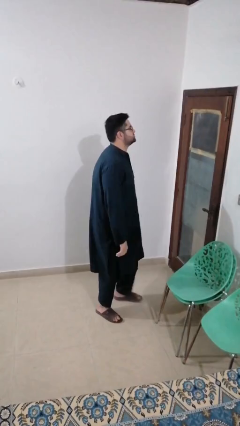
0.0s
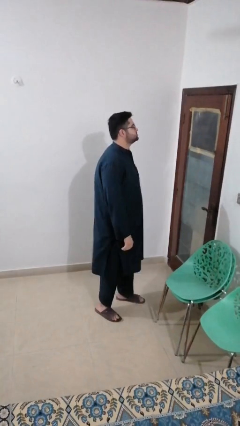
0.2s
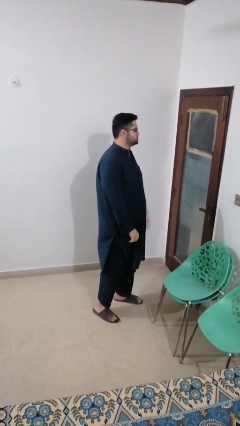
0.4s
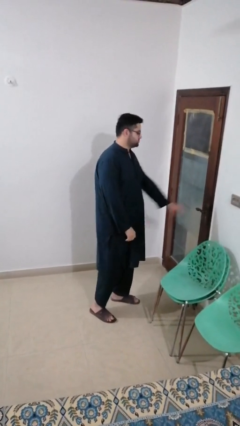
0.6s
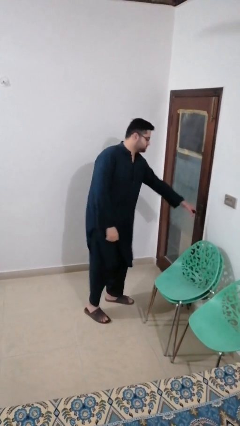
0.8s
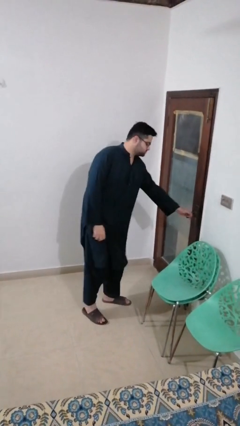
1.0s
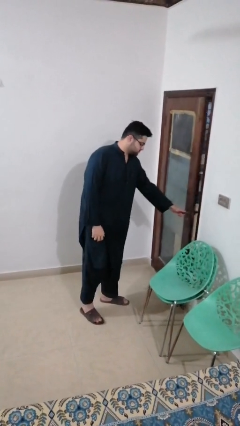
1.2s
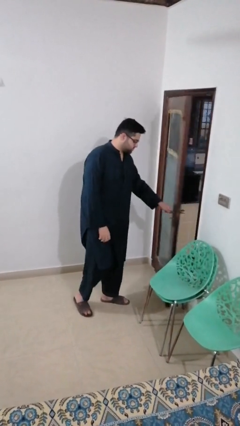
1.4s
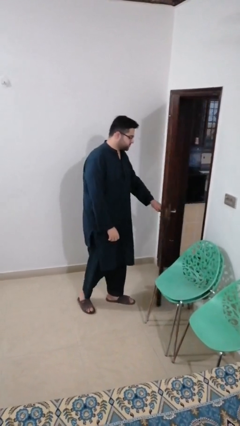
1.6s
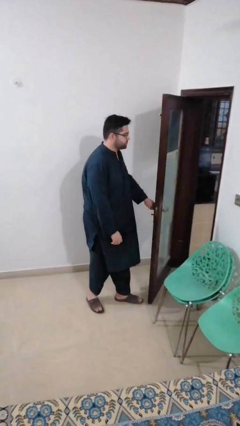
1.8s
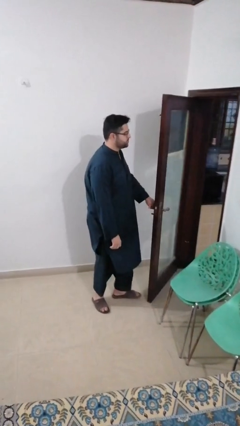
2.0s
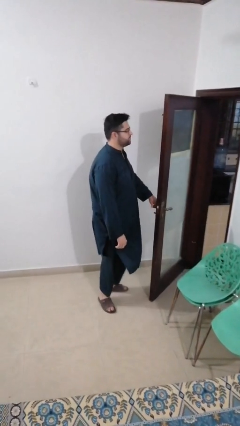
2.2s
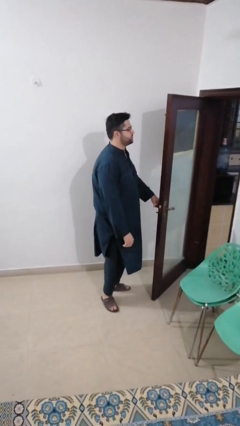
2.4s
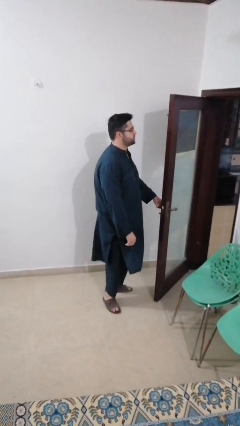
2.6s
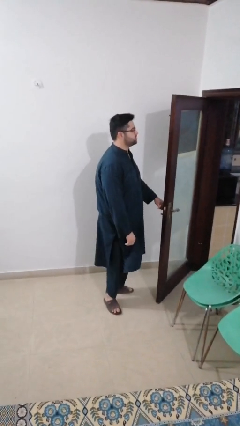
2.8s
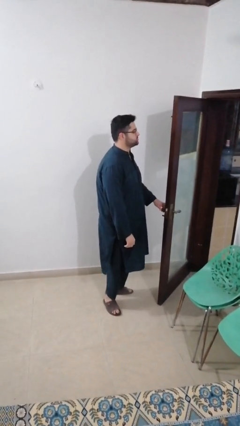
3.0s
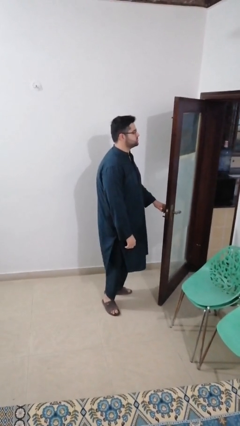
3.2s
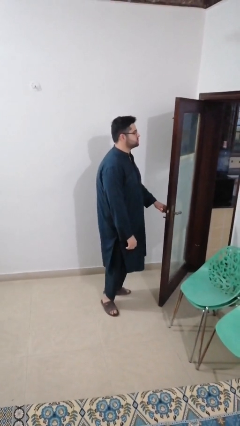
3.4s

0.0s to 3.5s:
person opens facility door

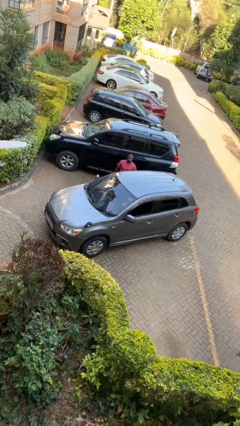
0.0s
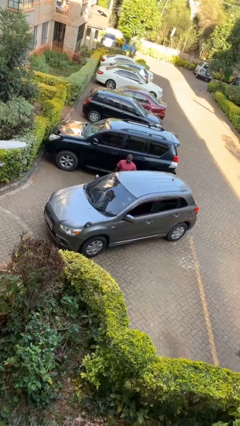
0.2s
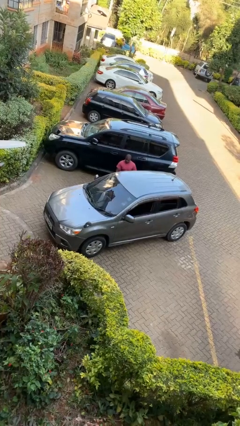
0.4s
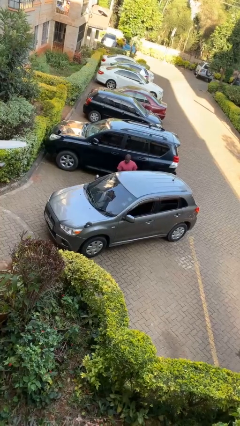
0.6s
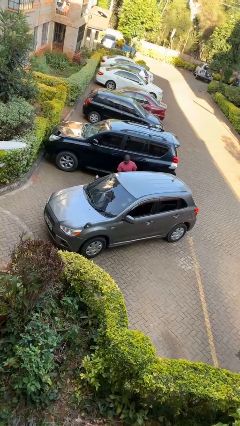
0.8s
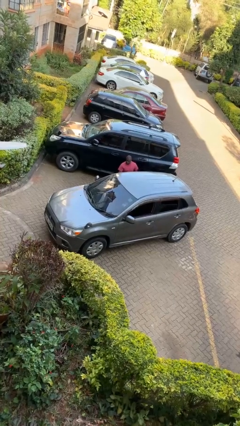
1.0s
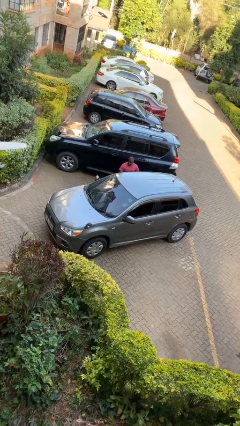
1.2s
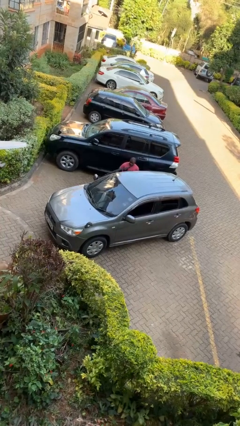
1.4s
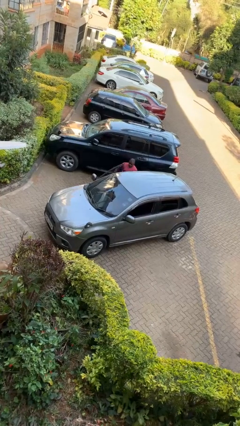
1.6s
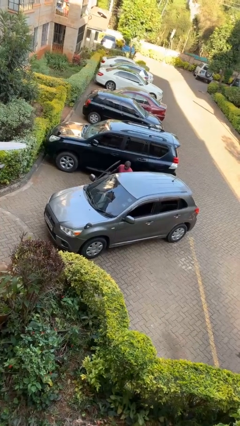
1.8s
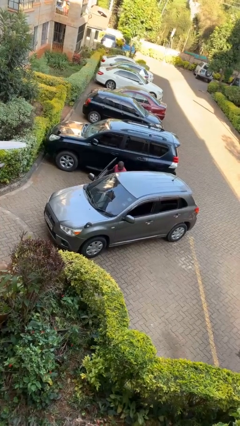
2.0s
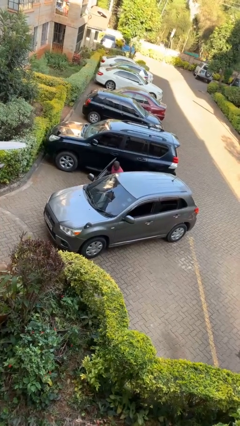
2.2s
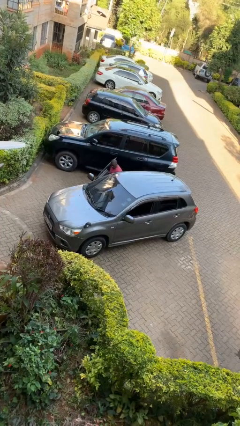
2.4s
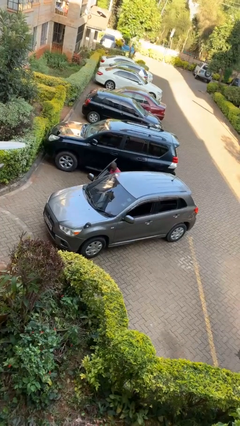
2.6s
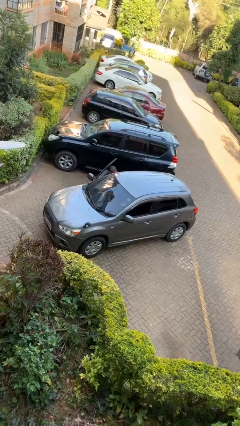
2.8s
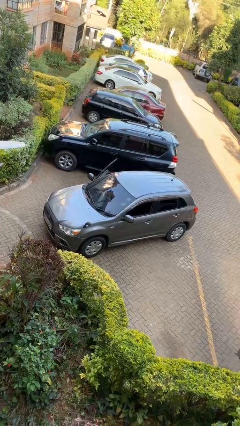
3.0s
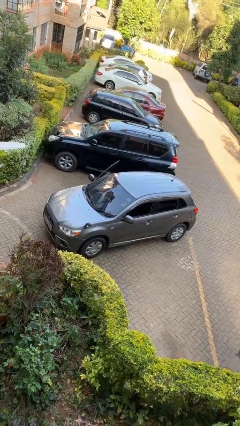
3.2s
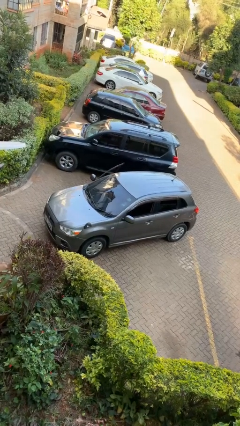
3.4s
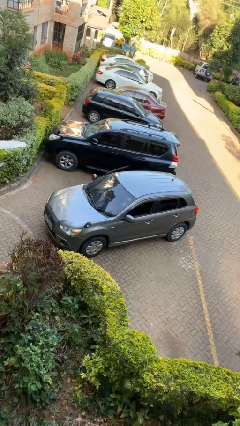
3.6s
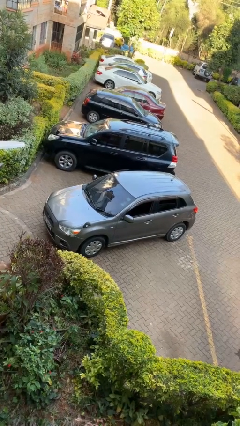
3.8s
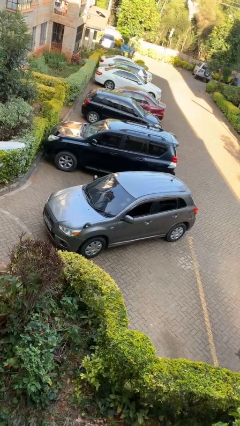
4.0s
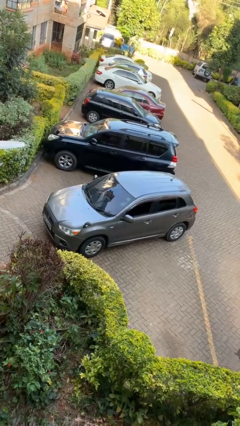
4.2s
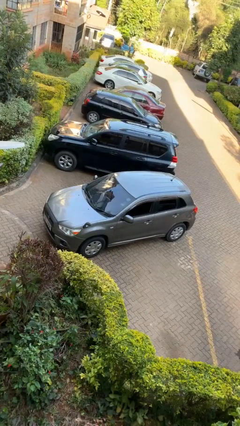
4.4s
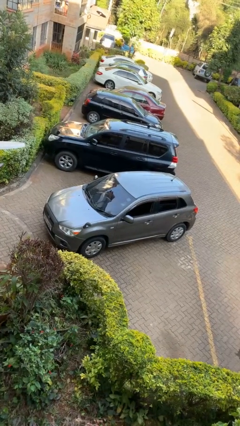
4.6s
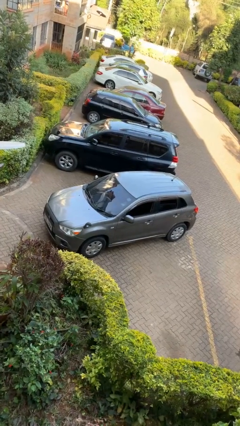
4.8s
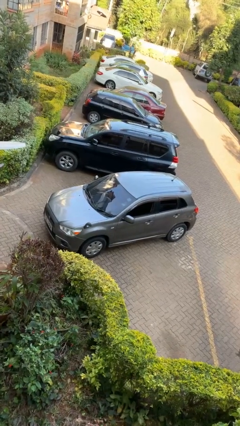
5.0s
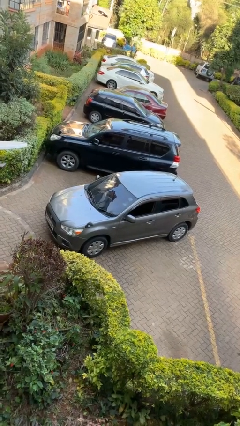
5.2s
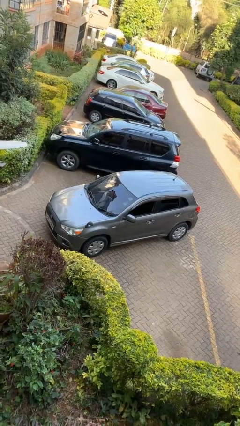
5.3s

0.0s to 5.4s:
car picks up person

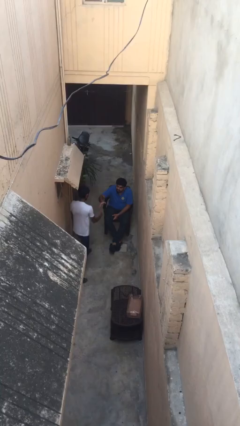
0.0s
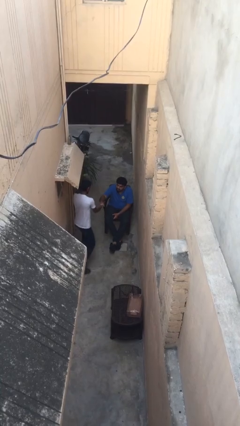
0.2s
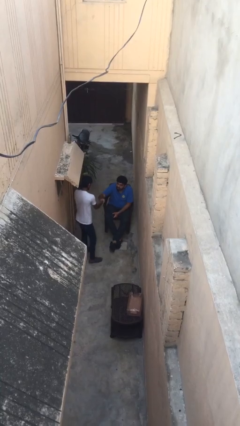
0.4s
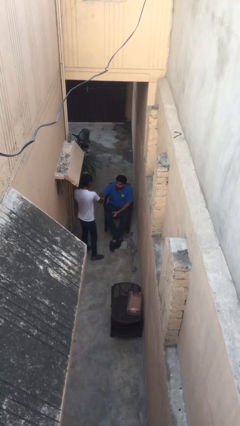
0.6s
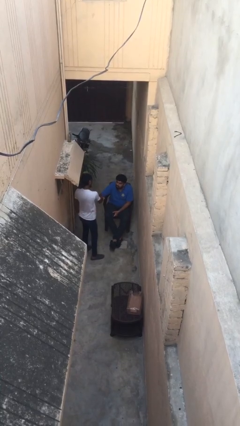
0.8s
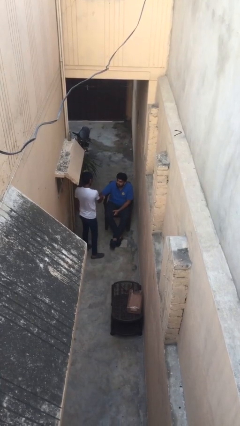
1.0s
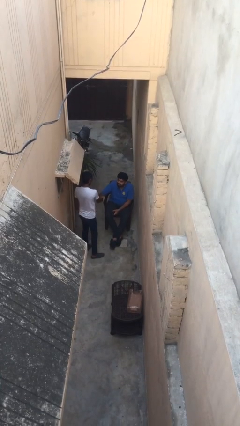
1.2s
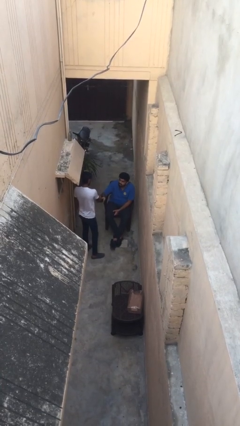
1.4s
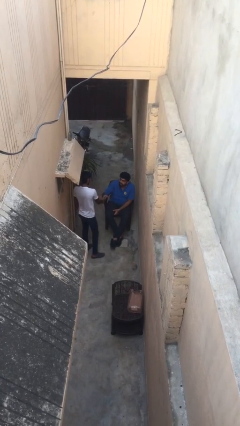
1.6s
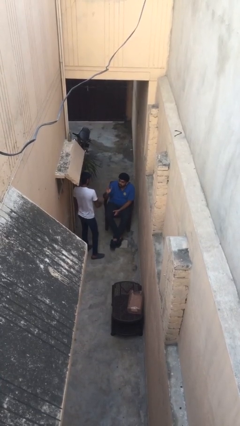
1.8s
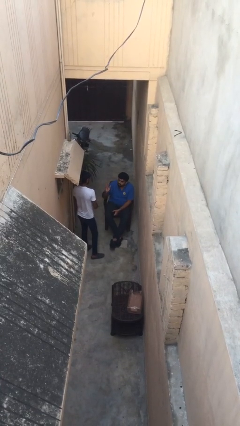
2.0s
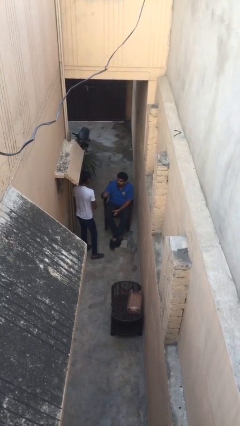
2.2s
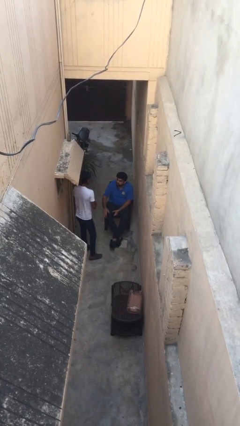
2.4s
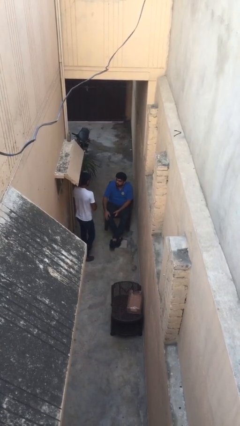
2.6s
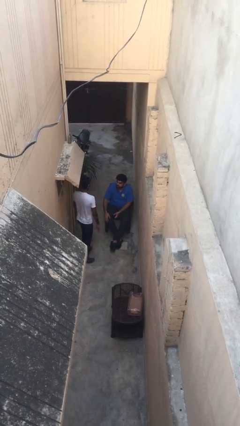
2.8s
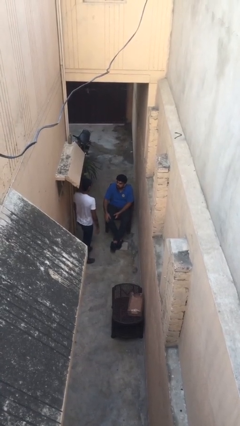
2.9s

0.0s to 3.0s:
person shakes hand

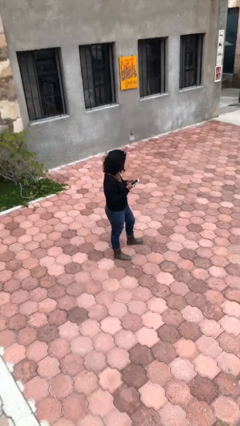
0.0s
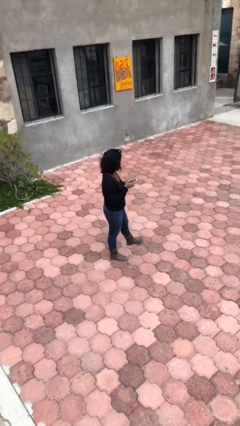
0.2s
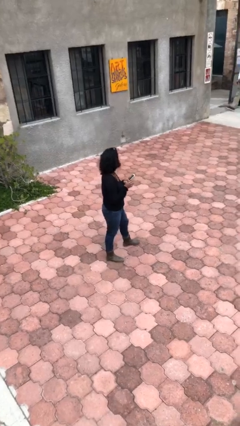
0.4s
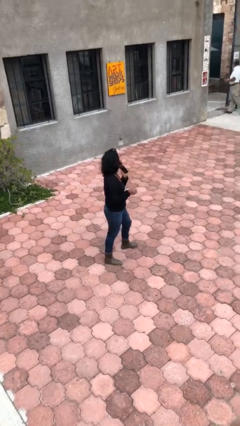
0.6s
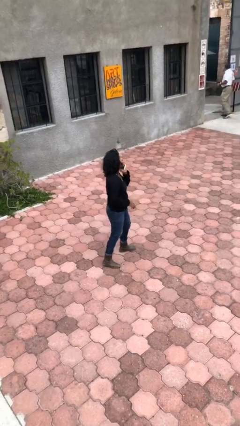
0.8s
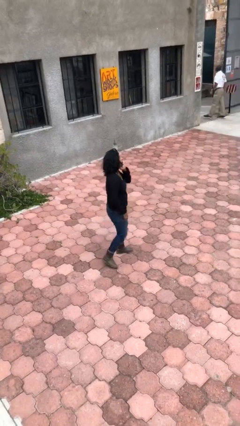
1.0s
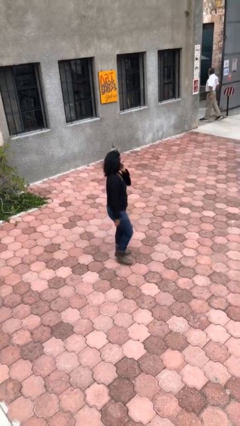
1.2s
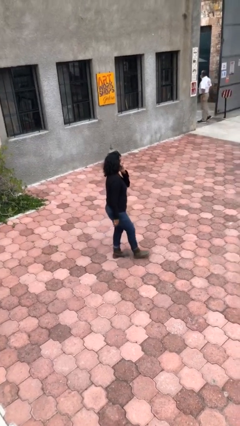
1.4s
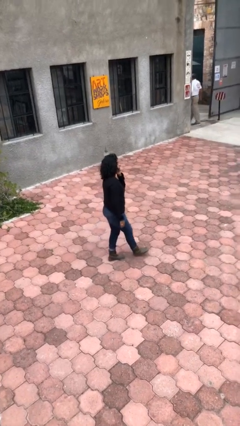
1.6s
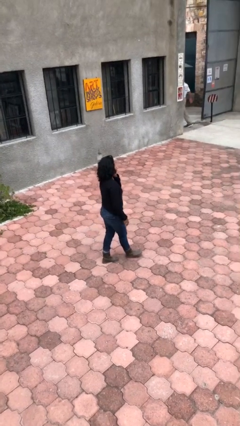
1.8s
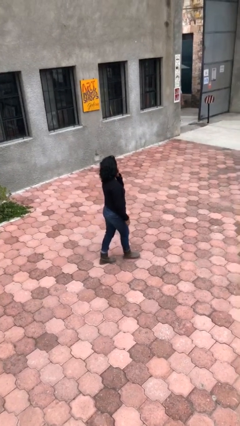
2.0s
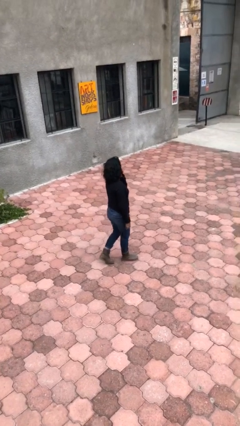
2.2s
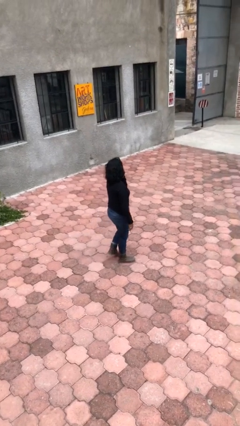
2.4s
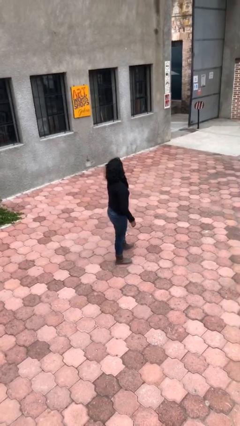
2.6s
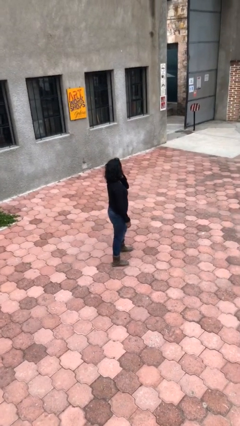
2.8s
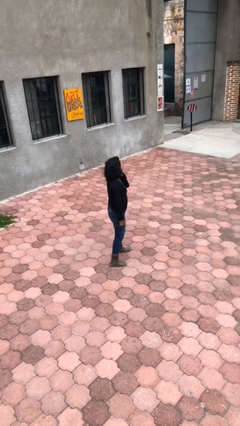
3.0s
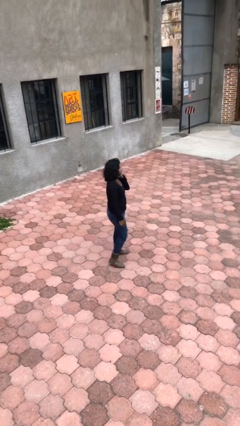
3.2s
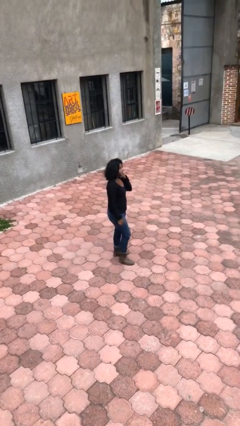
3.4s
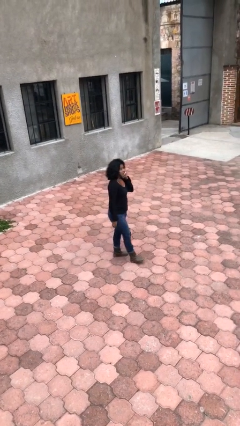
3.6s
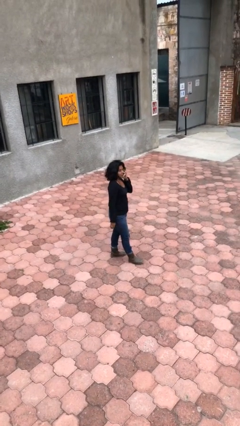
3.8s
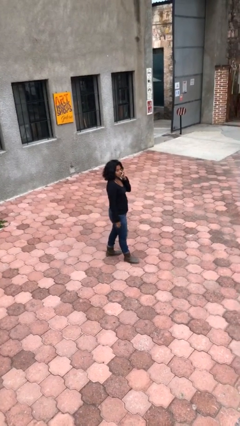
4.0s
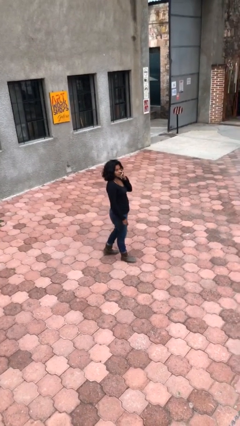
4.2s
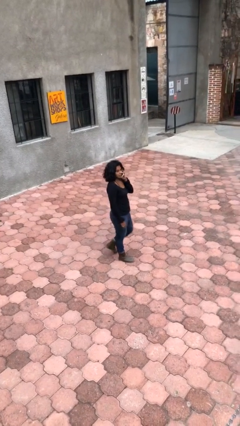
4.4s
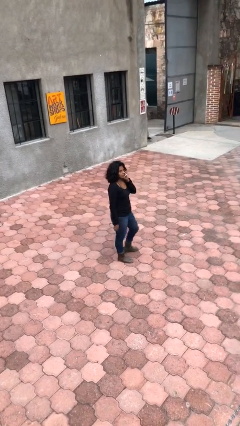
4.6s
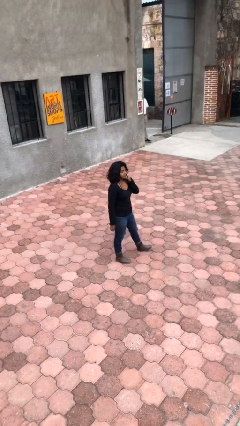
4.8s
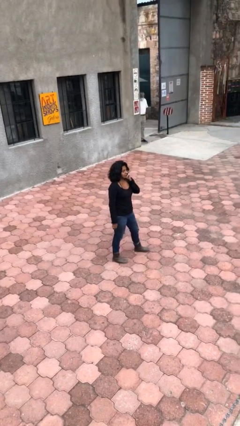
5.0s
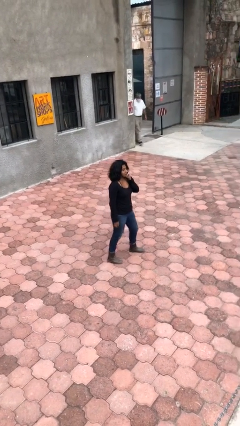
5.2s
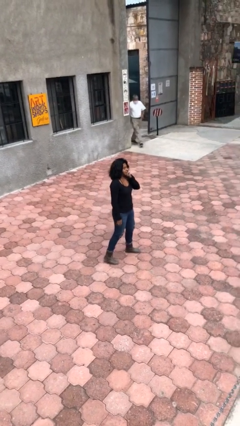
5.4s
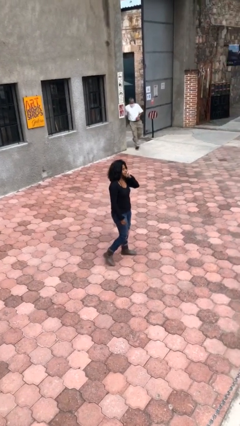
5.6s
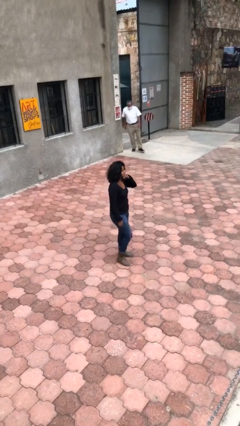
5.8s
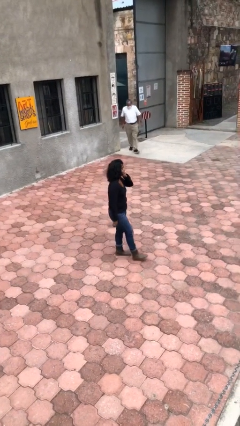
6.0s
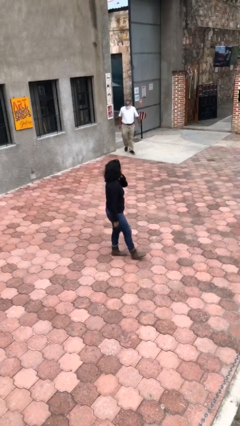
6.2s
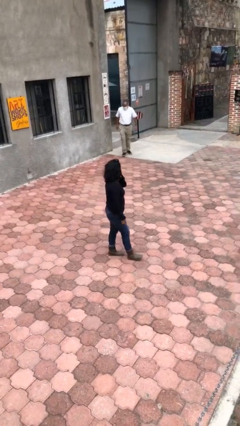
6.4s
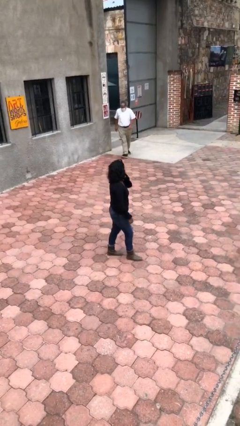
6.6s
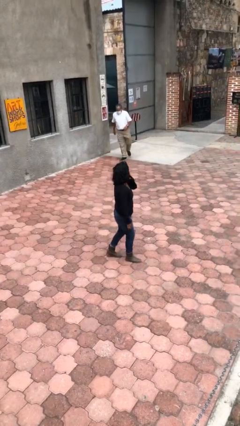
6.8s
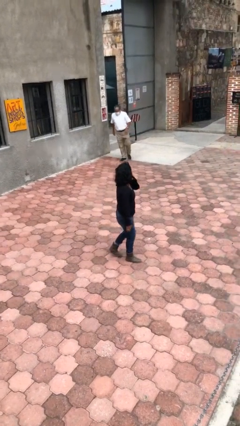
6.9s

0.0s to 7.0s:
person talks on phone
